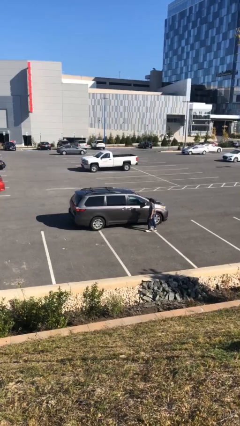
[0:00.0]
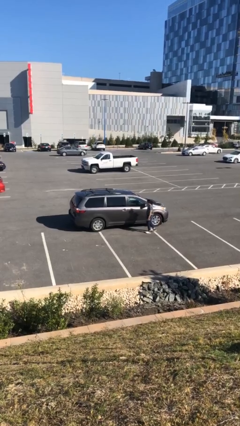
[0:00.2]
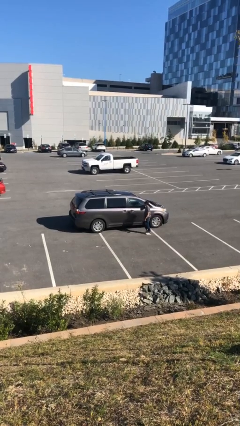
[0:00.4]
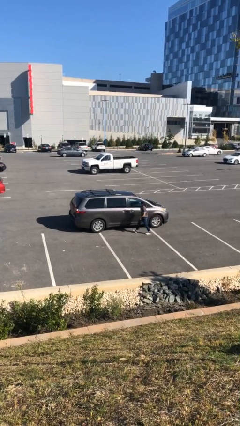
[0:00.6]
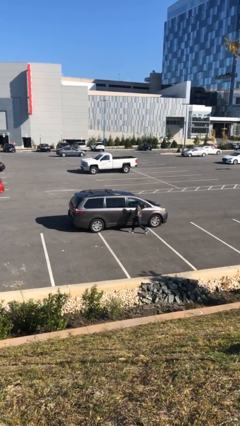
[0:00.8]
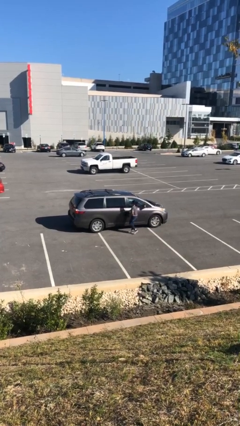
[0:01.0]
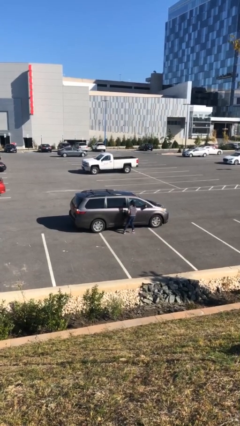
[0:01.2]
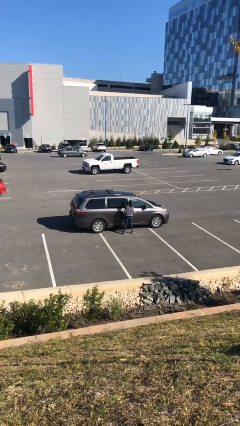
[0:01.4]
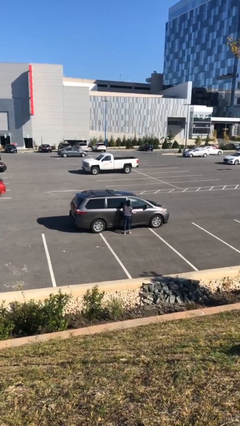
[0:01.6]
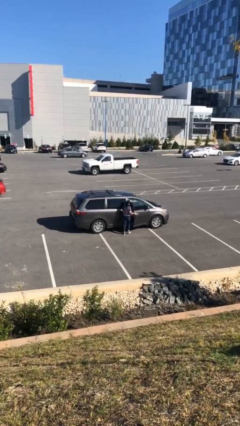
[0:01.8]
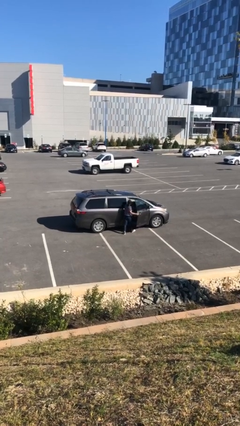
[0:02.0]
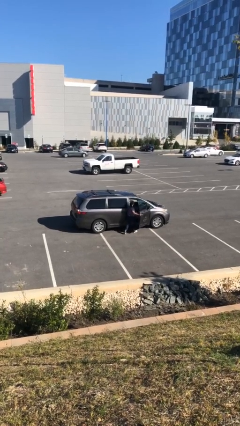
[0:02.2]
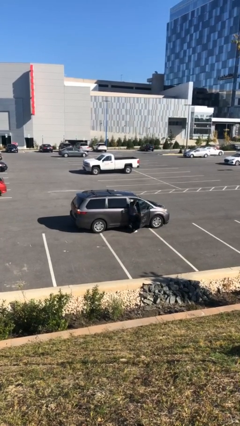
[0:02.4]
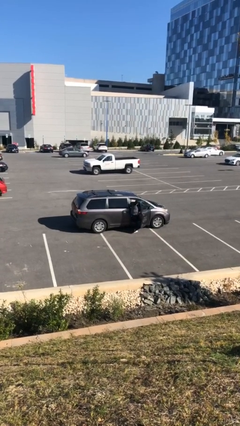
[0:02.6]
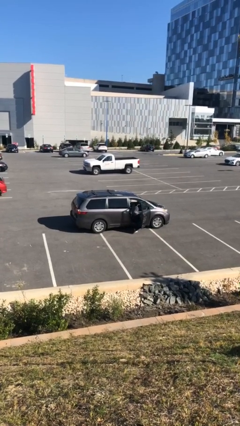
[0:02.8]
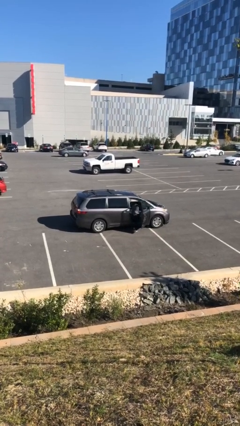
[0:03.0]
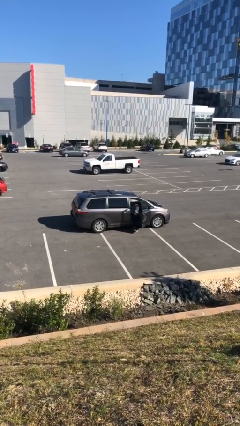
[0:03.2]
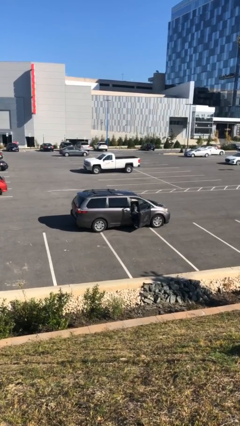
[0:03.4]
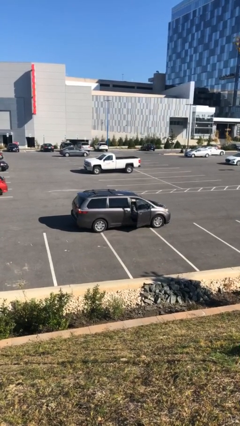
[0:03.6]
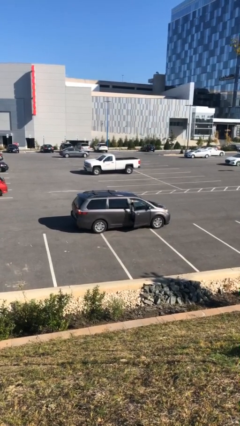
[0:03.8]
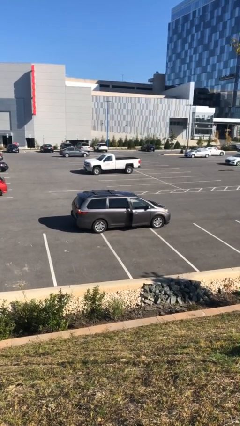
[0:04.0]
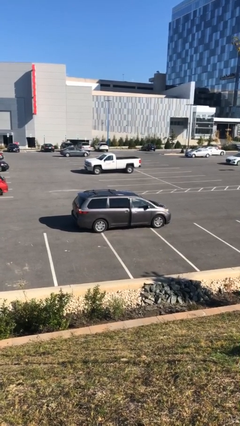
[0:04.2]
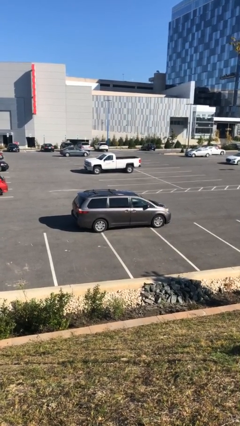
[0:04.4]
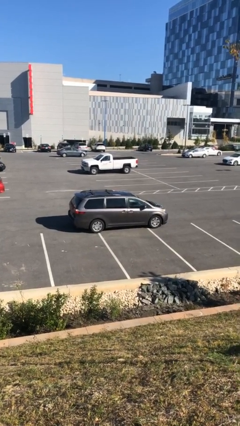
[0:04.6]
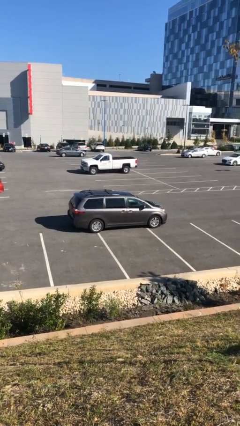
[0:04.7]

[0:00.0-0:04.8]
car picks up person

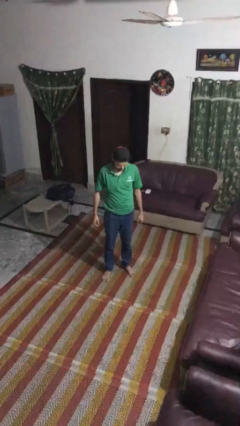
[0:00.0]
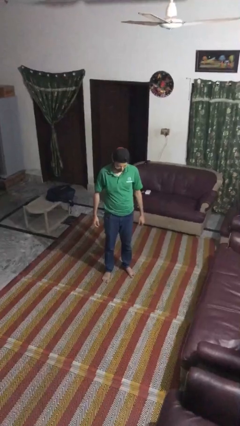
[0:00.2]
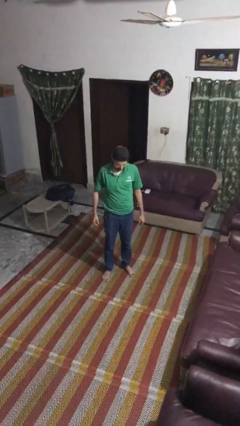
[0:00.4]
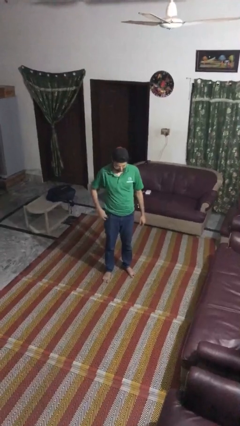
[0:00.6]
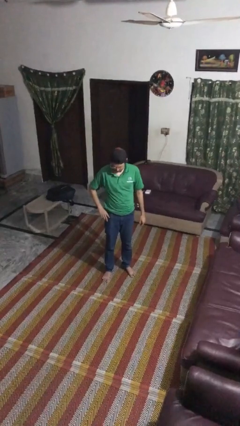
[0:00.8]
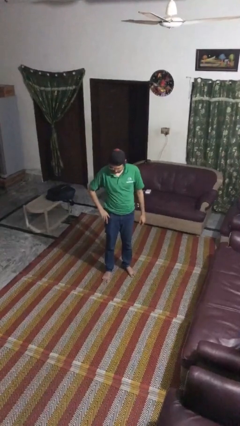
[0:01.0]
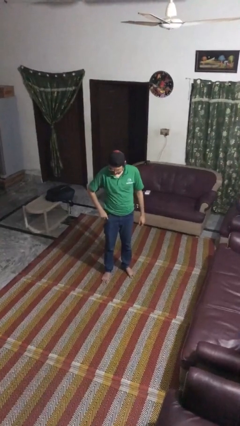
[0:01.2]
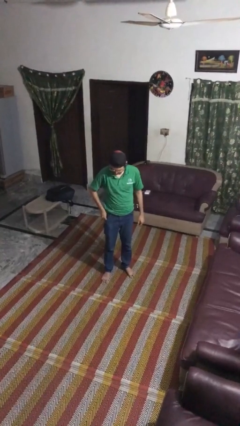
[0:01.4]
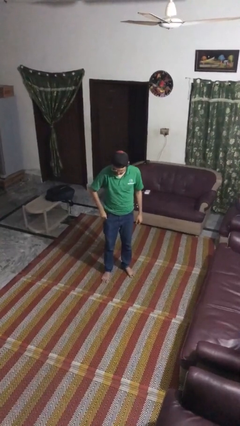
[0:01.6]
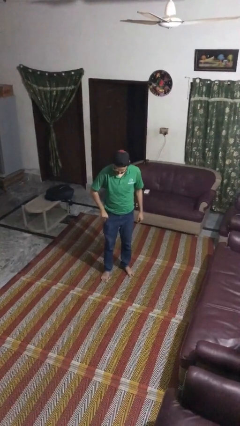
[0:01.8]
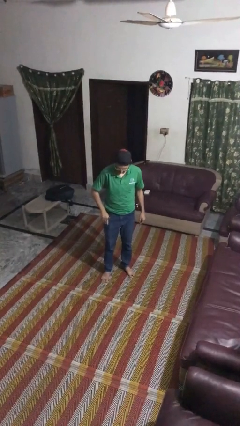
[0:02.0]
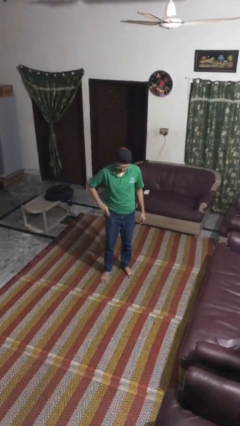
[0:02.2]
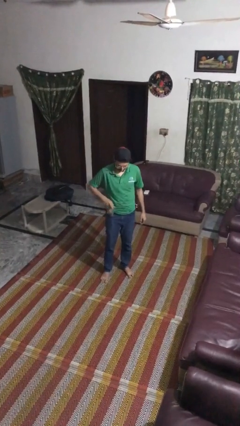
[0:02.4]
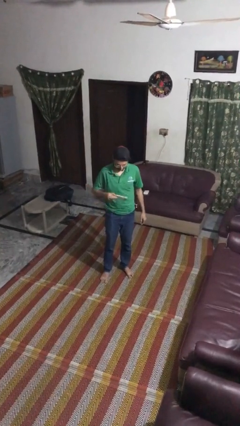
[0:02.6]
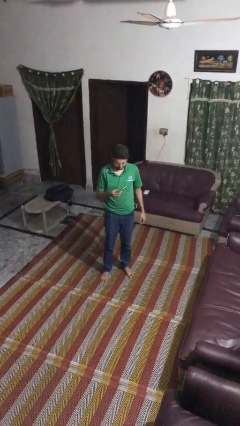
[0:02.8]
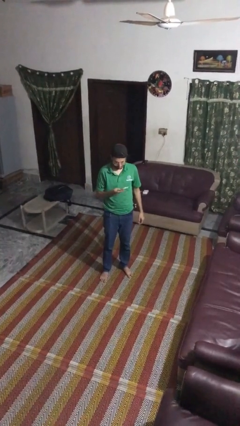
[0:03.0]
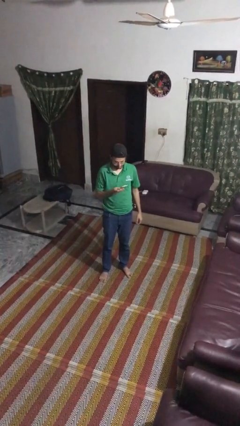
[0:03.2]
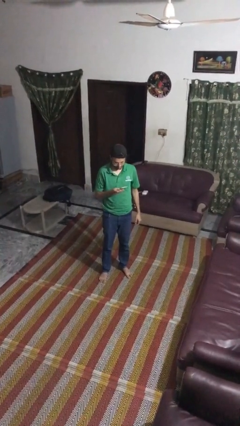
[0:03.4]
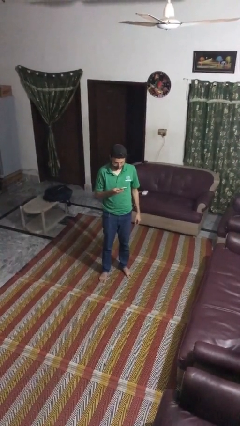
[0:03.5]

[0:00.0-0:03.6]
person takes phone from pocket

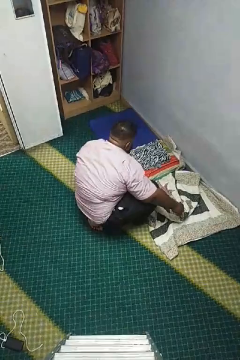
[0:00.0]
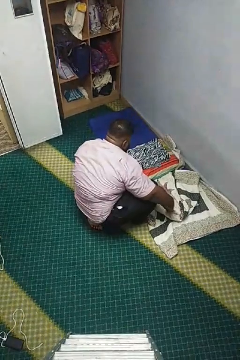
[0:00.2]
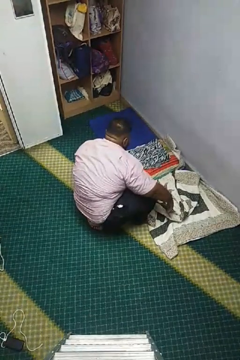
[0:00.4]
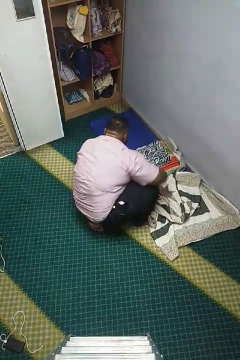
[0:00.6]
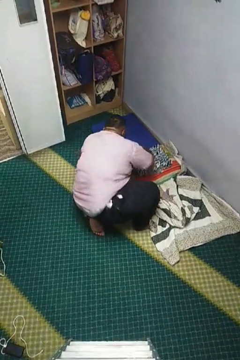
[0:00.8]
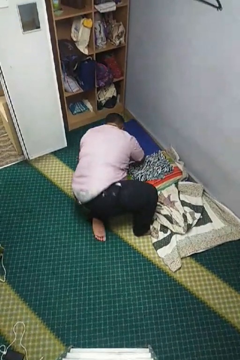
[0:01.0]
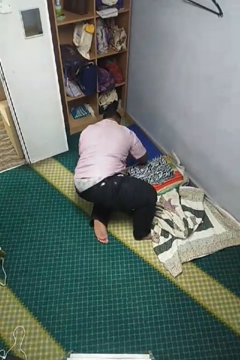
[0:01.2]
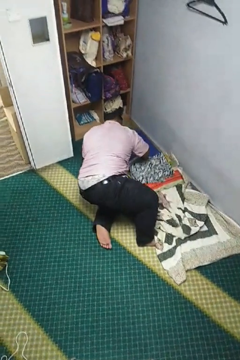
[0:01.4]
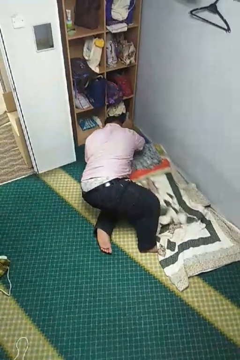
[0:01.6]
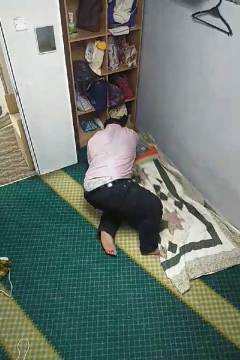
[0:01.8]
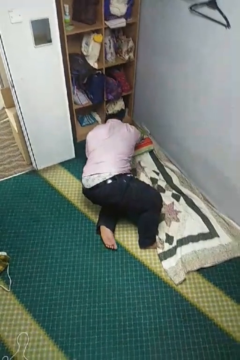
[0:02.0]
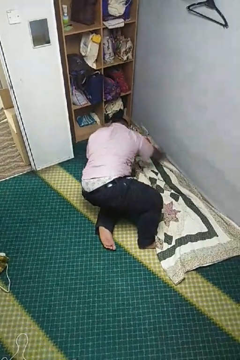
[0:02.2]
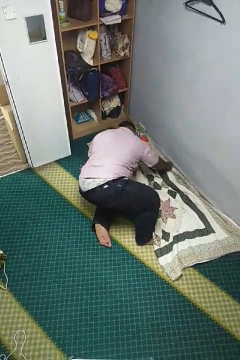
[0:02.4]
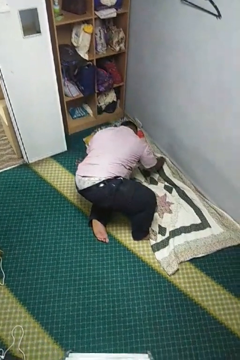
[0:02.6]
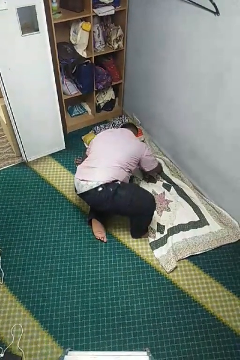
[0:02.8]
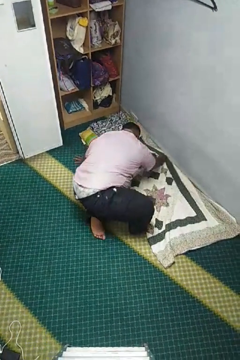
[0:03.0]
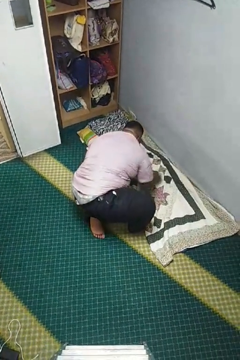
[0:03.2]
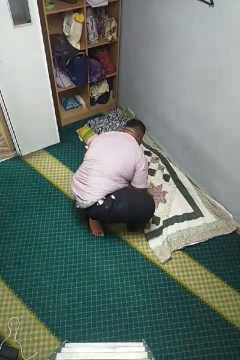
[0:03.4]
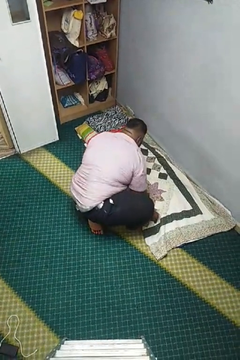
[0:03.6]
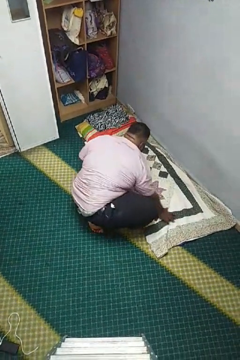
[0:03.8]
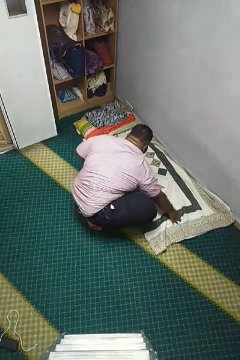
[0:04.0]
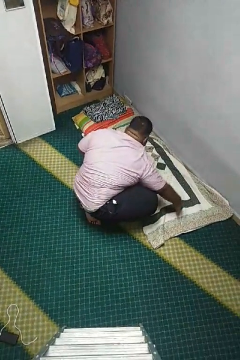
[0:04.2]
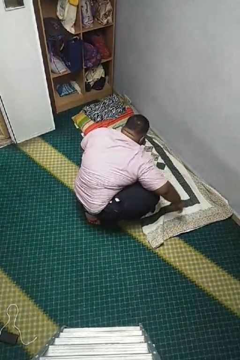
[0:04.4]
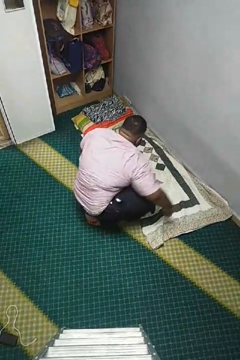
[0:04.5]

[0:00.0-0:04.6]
person makes bed

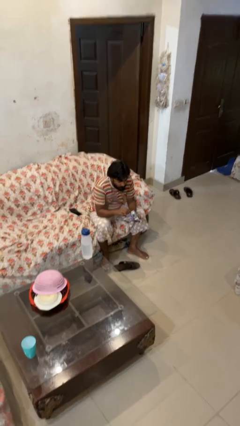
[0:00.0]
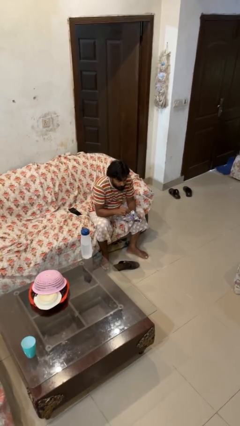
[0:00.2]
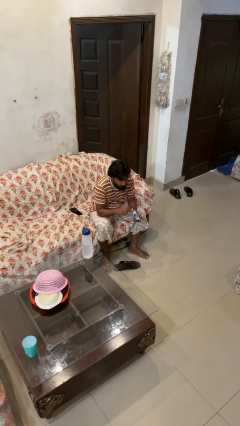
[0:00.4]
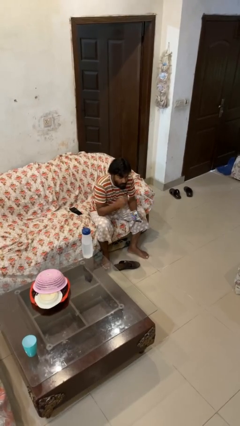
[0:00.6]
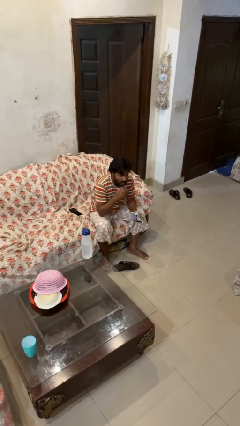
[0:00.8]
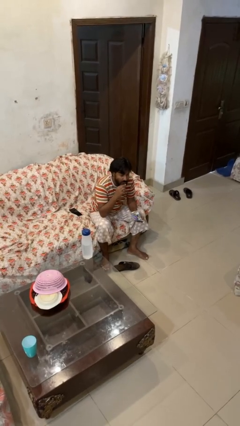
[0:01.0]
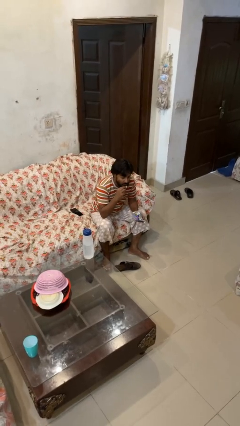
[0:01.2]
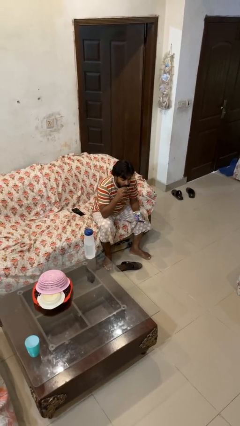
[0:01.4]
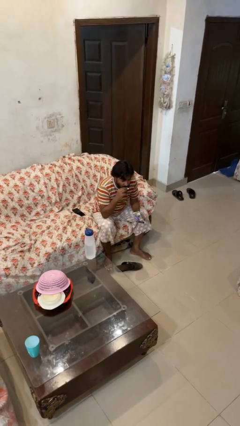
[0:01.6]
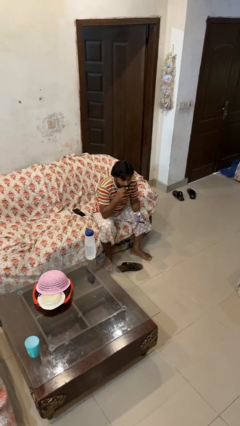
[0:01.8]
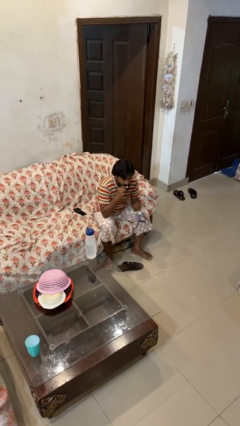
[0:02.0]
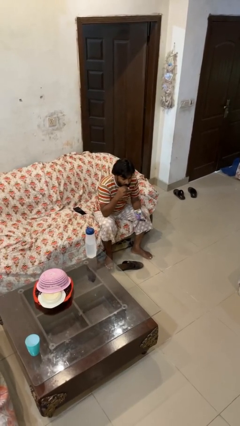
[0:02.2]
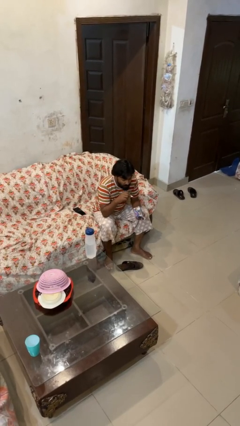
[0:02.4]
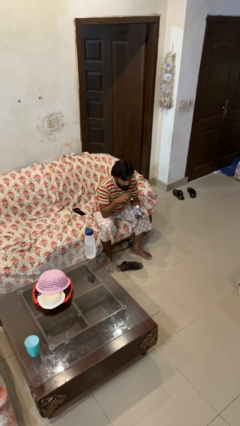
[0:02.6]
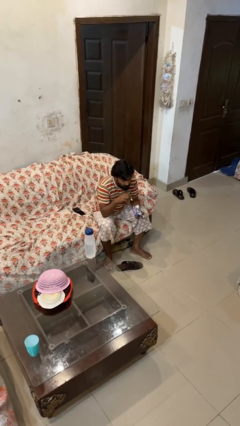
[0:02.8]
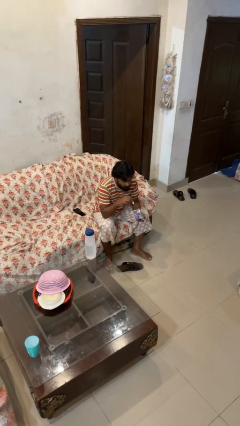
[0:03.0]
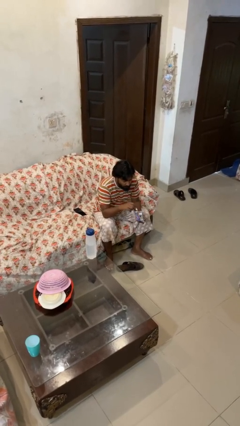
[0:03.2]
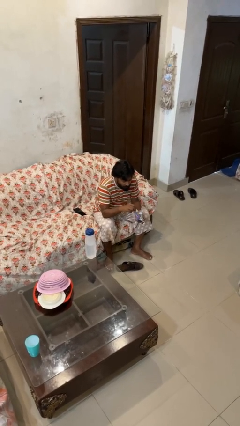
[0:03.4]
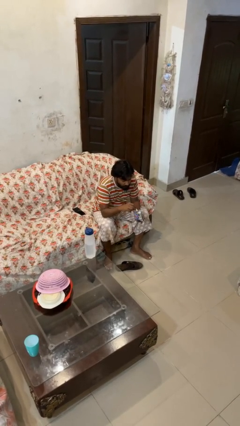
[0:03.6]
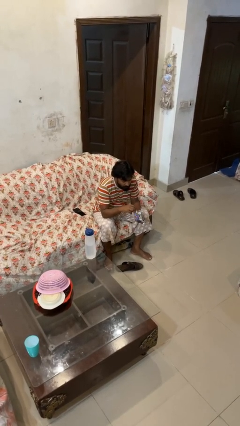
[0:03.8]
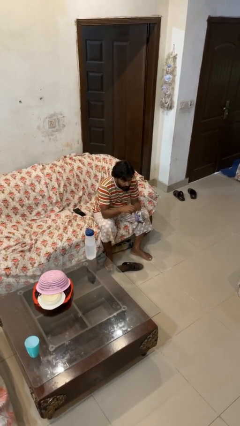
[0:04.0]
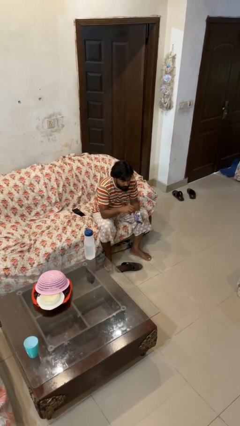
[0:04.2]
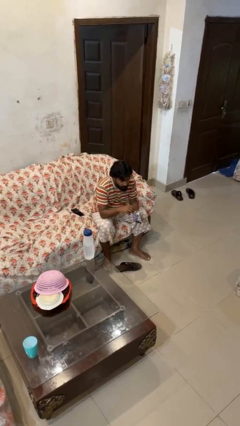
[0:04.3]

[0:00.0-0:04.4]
person eats snack from bag

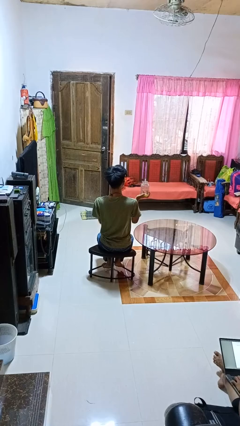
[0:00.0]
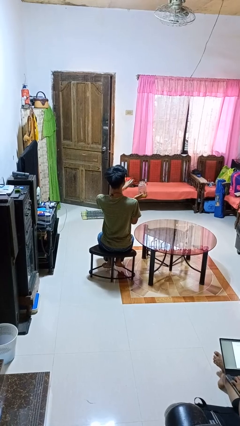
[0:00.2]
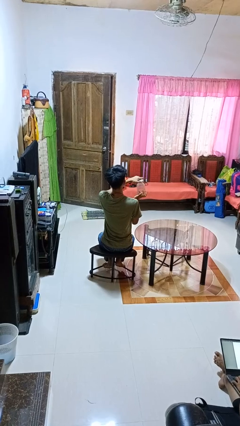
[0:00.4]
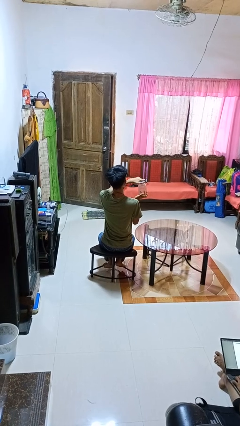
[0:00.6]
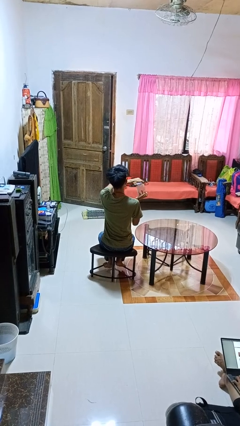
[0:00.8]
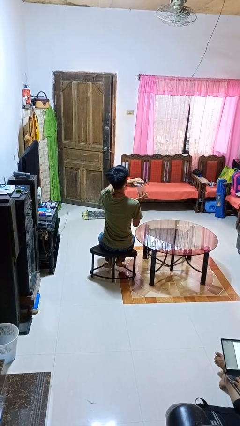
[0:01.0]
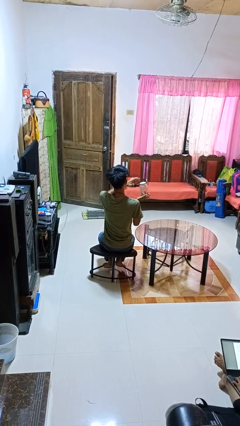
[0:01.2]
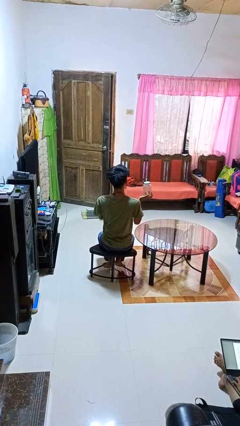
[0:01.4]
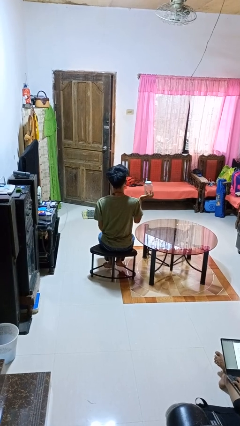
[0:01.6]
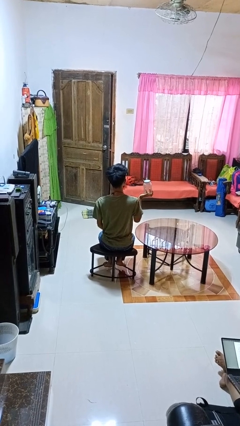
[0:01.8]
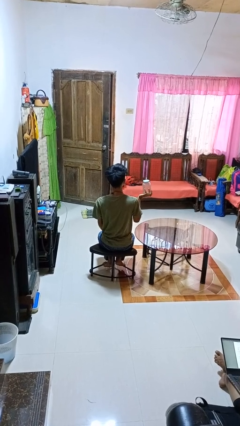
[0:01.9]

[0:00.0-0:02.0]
person closes jar
